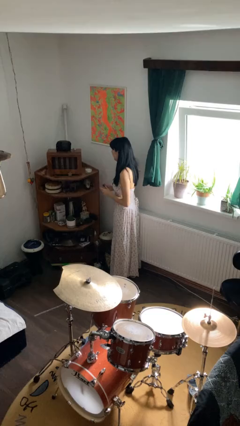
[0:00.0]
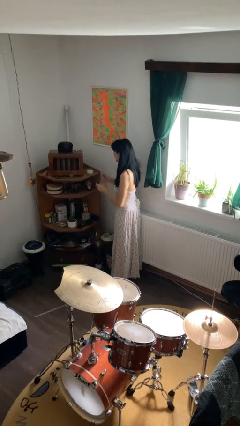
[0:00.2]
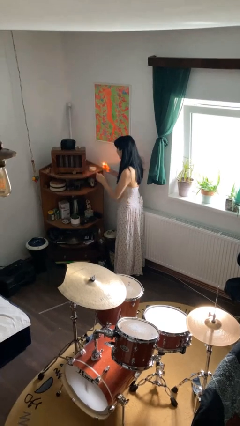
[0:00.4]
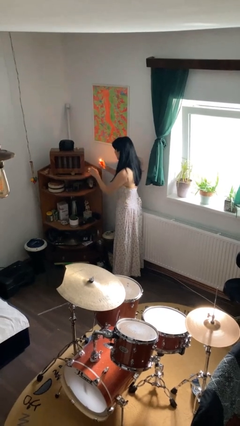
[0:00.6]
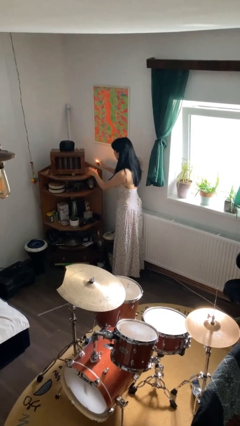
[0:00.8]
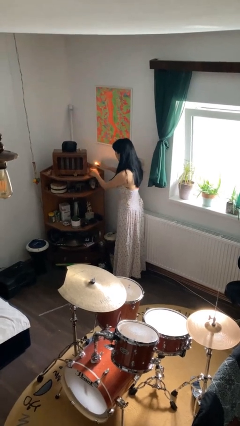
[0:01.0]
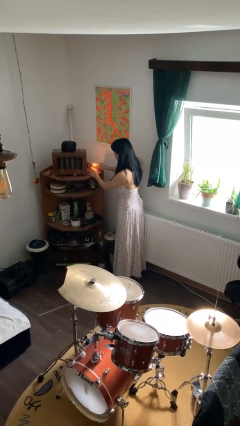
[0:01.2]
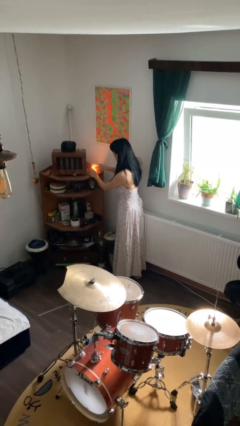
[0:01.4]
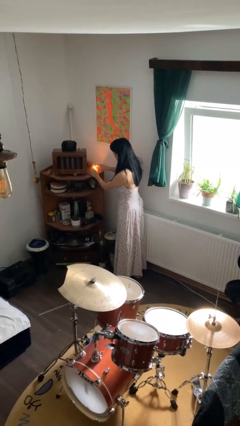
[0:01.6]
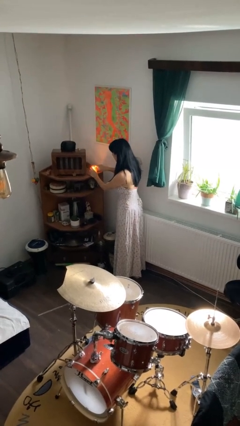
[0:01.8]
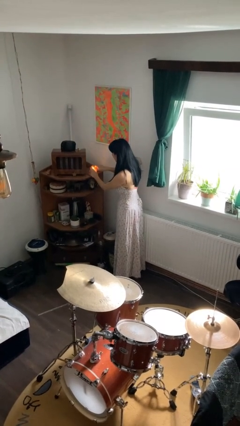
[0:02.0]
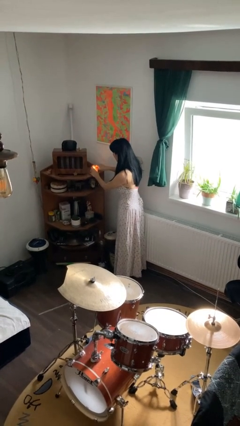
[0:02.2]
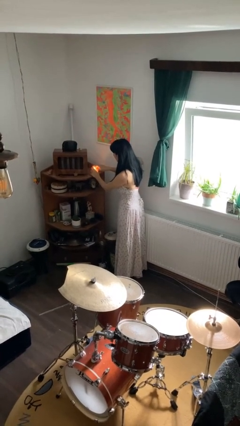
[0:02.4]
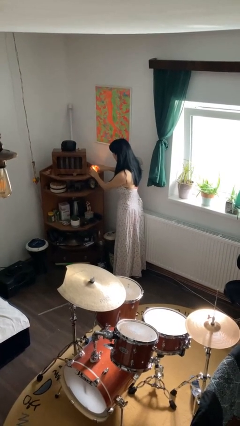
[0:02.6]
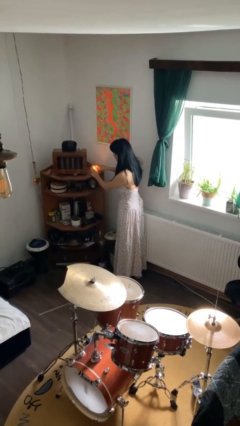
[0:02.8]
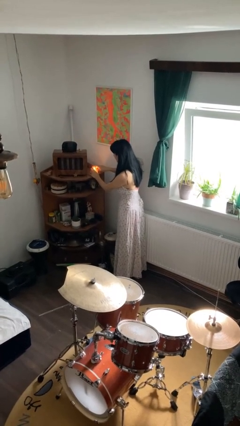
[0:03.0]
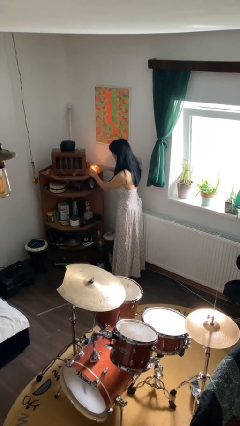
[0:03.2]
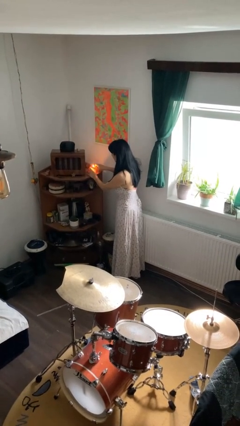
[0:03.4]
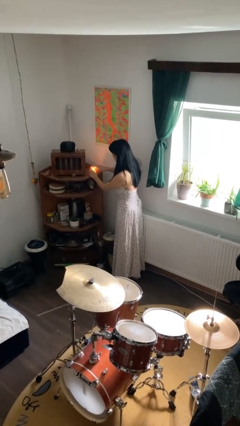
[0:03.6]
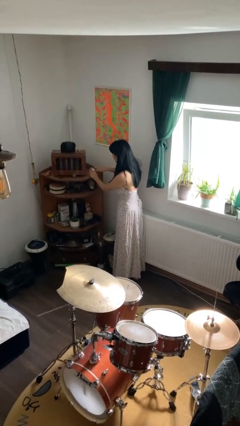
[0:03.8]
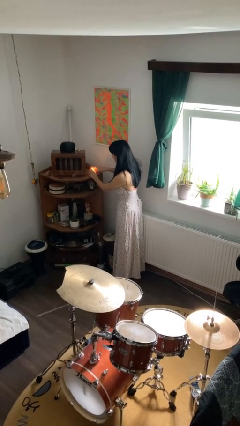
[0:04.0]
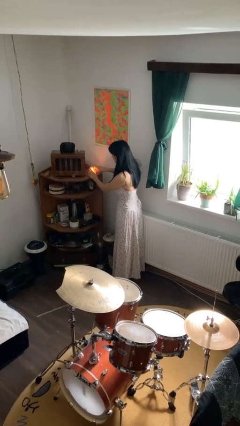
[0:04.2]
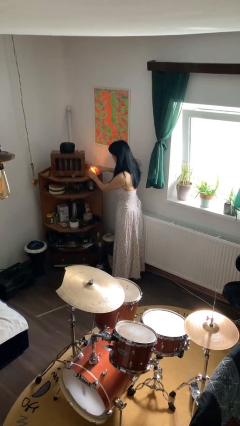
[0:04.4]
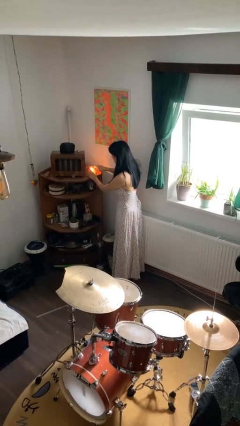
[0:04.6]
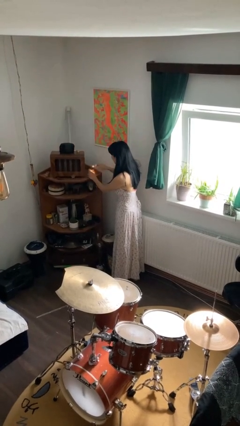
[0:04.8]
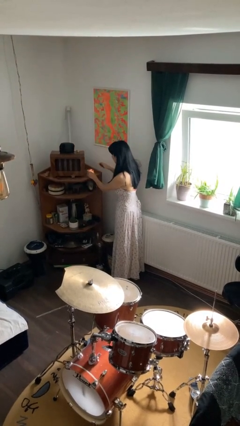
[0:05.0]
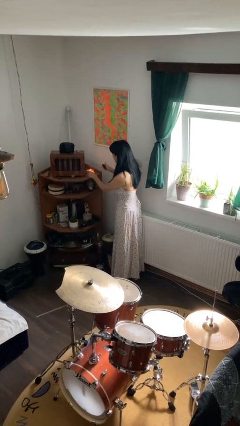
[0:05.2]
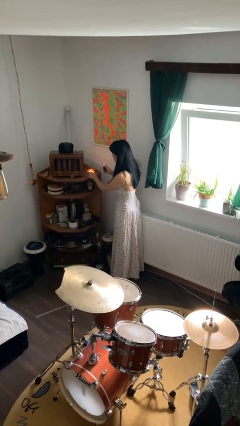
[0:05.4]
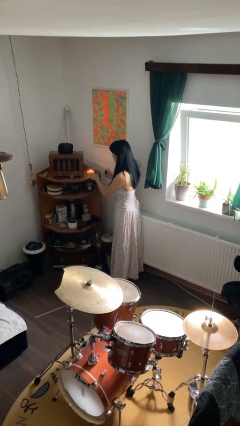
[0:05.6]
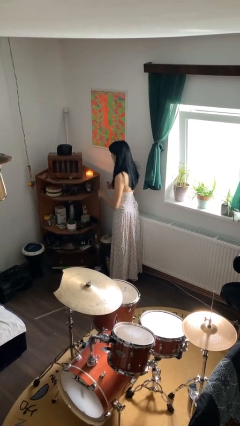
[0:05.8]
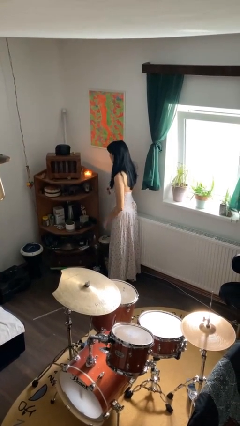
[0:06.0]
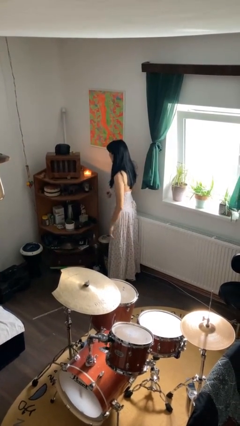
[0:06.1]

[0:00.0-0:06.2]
person lights candle

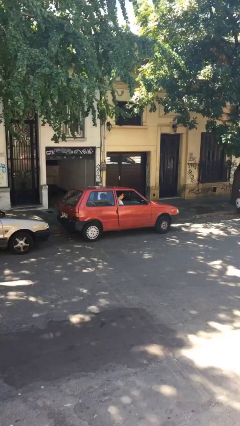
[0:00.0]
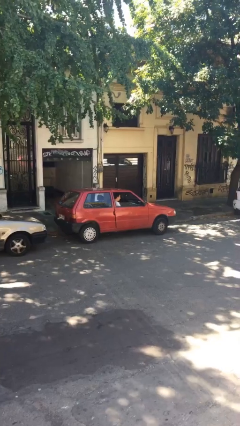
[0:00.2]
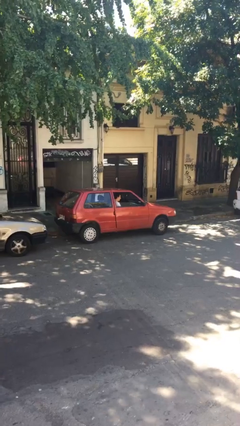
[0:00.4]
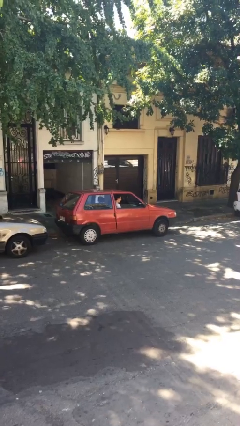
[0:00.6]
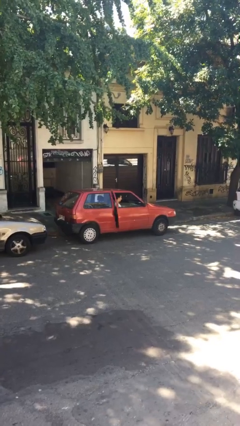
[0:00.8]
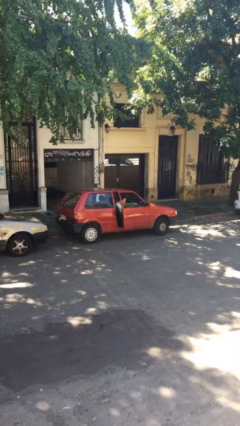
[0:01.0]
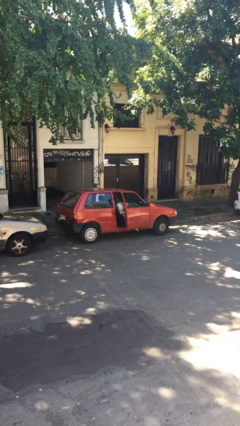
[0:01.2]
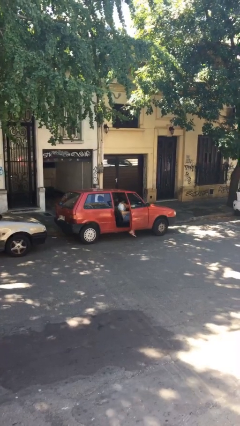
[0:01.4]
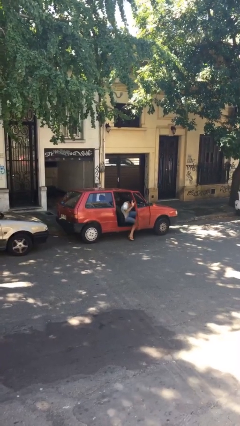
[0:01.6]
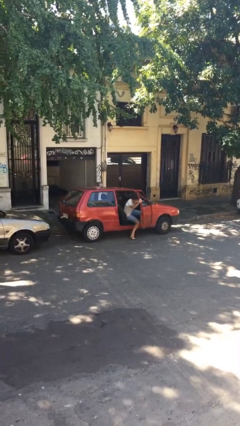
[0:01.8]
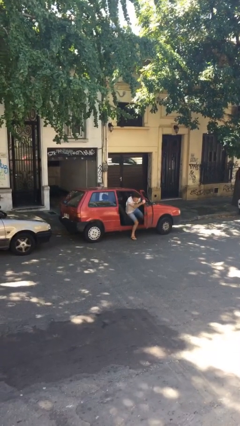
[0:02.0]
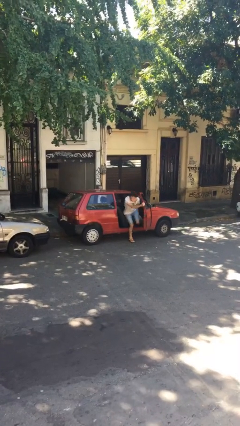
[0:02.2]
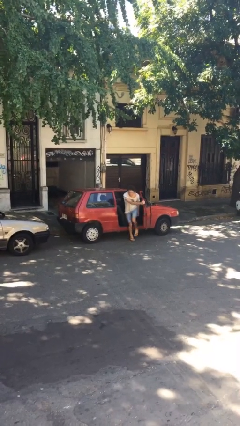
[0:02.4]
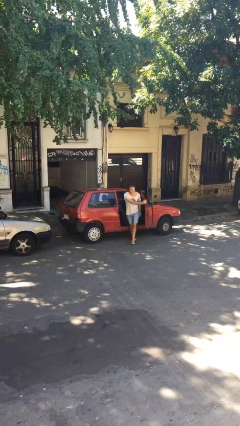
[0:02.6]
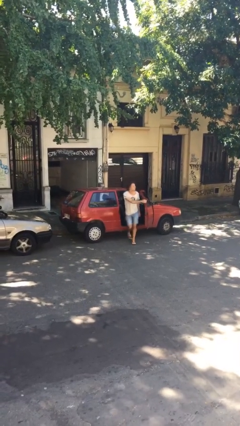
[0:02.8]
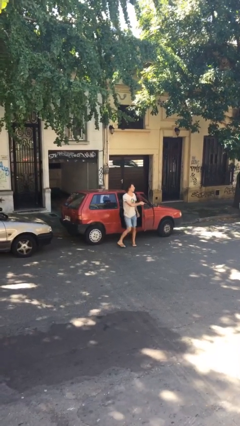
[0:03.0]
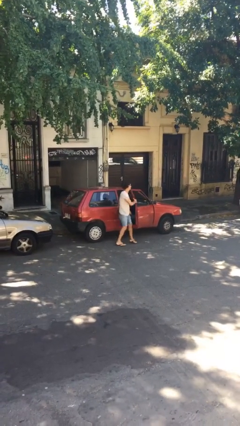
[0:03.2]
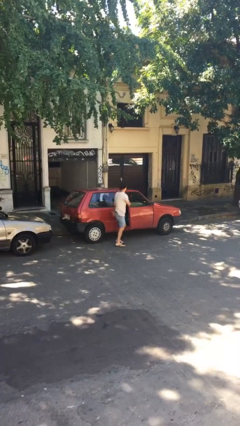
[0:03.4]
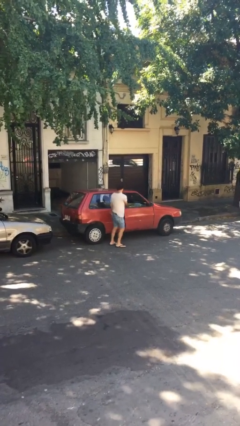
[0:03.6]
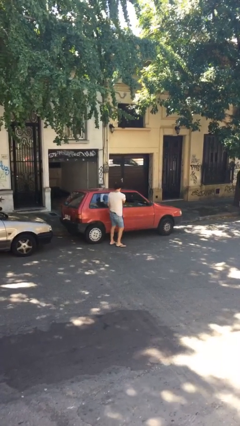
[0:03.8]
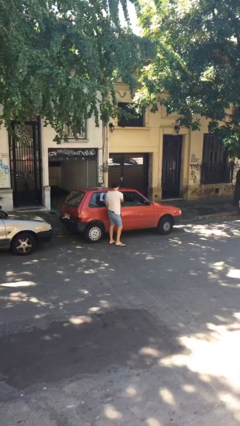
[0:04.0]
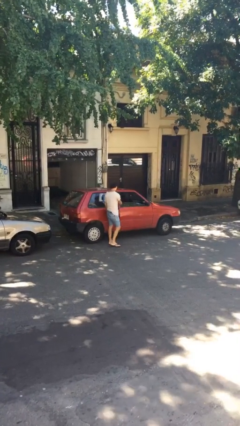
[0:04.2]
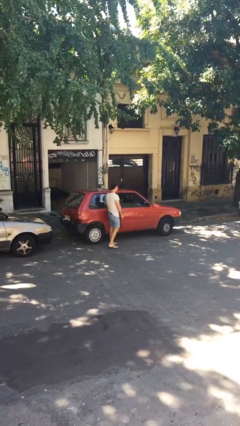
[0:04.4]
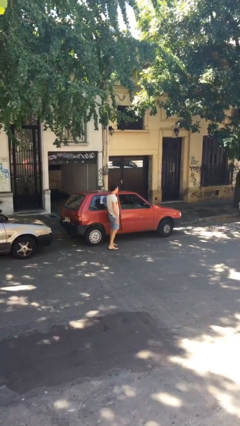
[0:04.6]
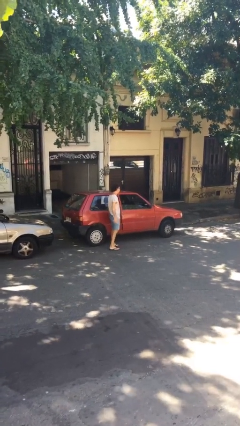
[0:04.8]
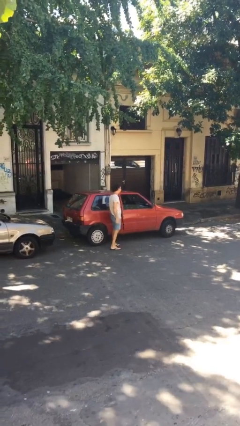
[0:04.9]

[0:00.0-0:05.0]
car drops off person

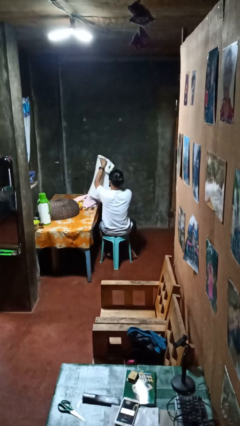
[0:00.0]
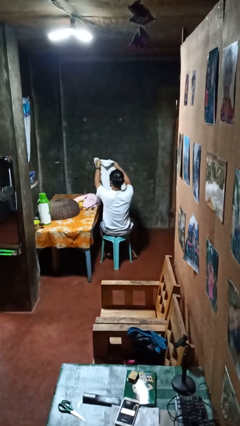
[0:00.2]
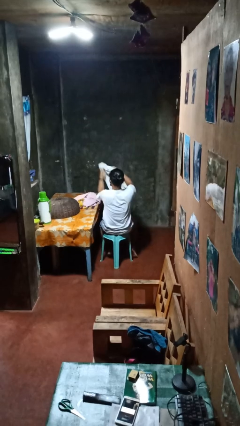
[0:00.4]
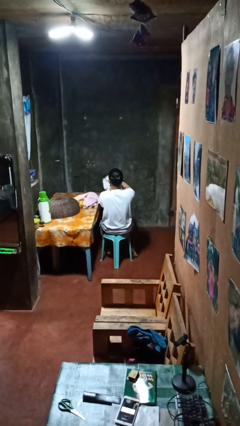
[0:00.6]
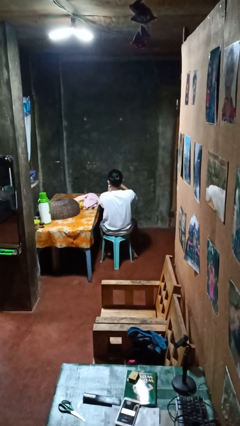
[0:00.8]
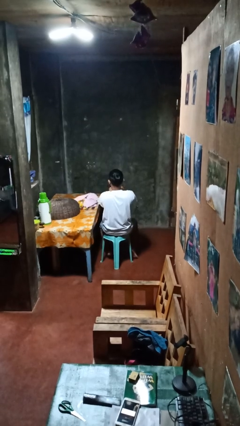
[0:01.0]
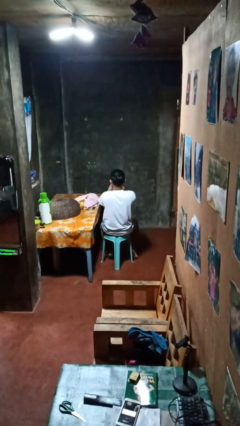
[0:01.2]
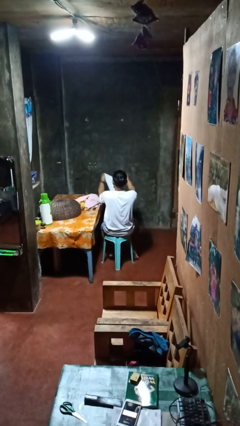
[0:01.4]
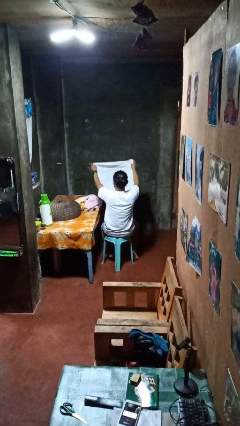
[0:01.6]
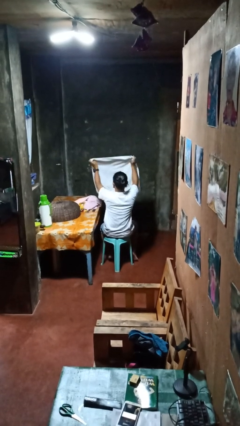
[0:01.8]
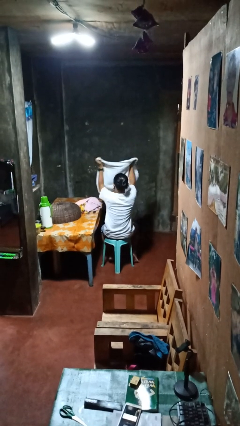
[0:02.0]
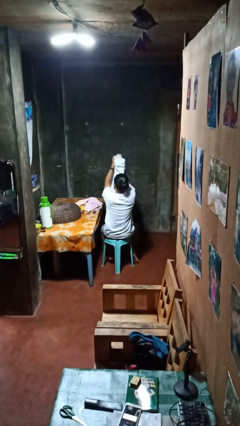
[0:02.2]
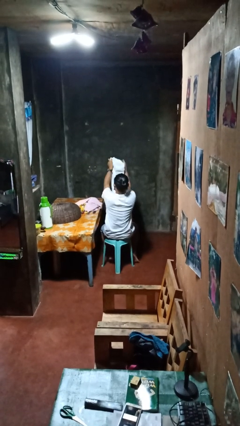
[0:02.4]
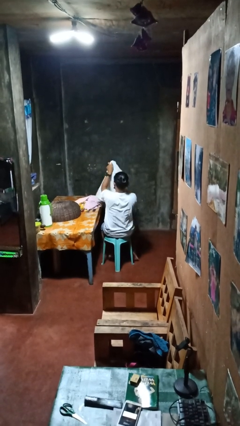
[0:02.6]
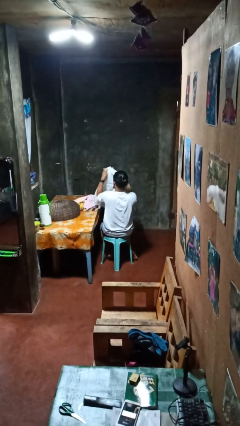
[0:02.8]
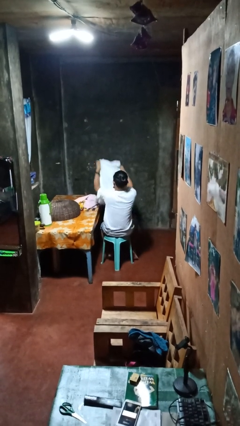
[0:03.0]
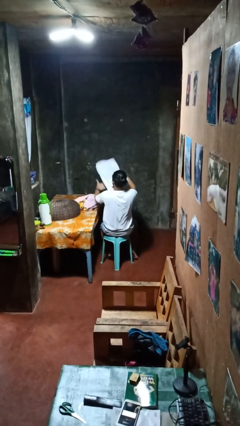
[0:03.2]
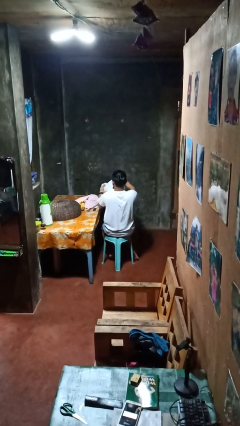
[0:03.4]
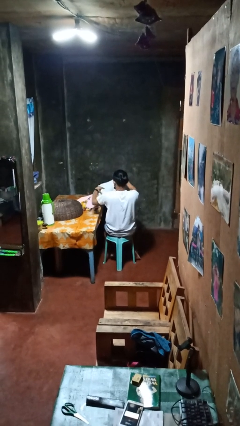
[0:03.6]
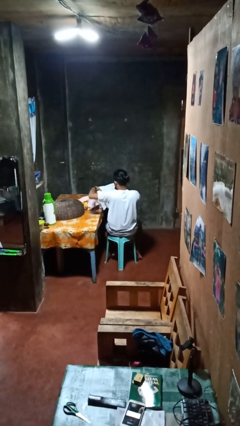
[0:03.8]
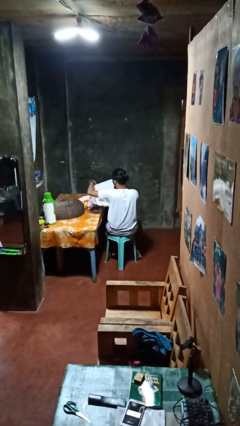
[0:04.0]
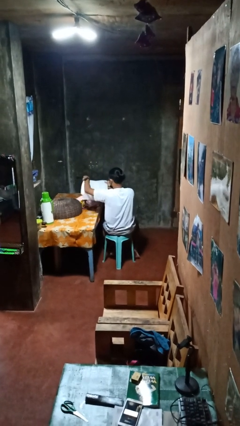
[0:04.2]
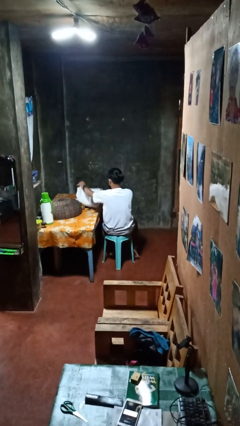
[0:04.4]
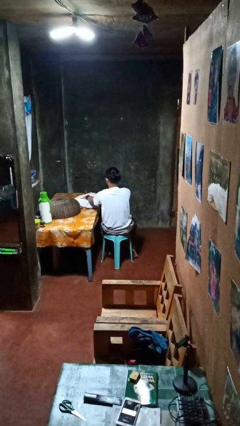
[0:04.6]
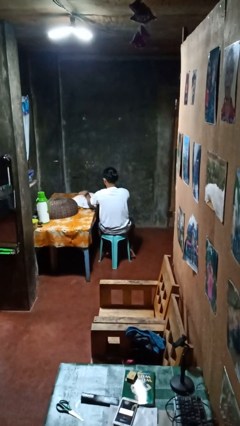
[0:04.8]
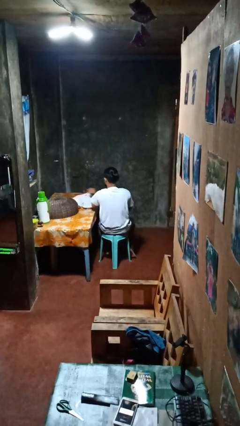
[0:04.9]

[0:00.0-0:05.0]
person folds towel

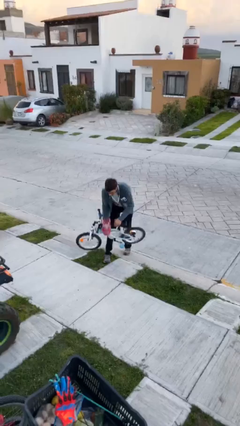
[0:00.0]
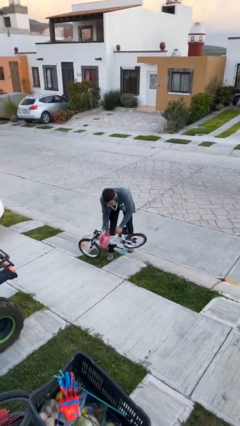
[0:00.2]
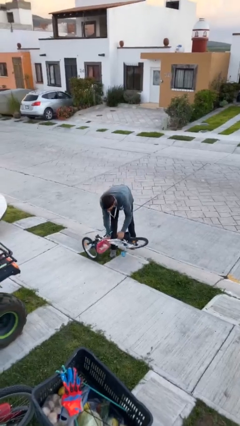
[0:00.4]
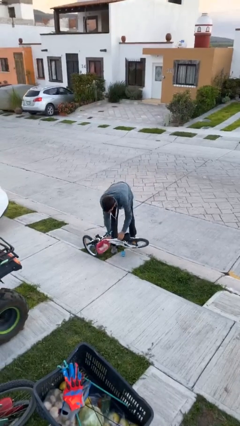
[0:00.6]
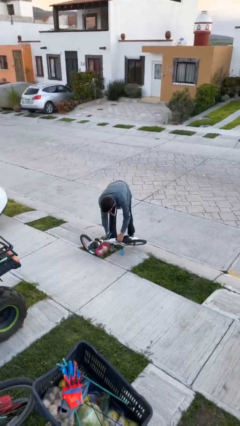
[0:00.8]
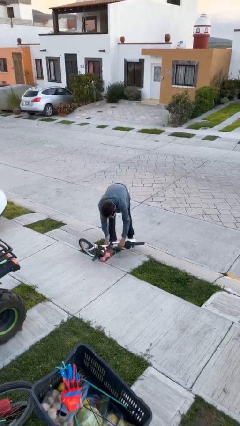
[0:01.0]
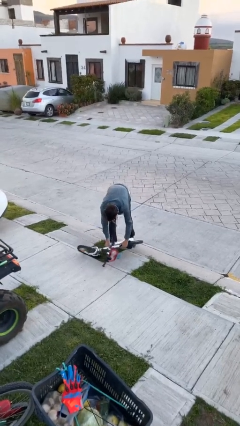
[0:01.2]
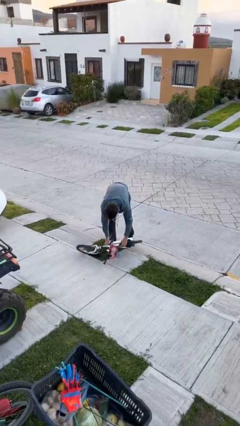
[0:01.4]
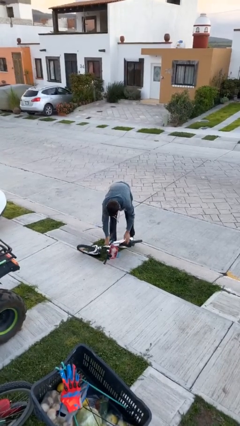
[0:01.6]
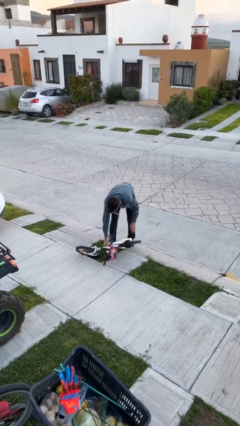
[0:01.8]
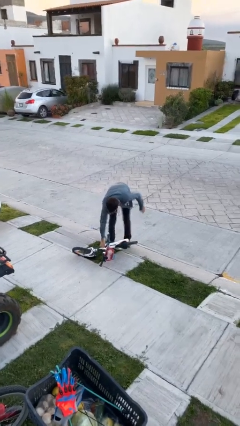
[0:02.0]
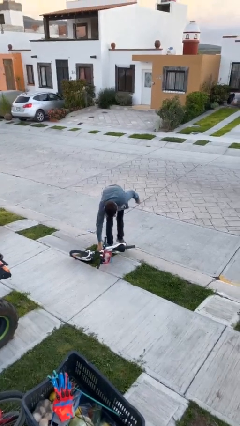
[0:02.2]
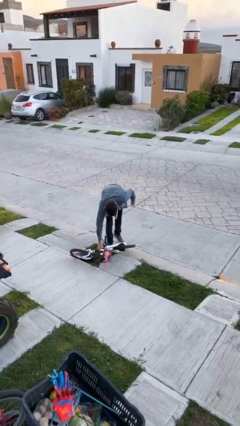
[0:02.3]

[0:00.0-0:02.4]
person puts down object on floor
